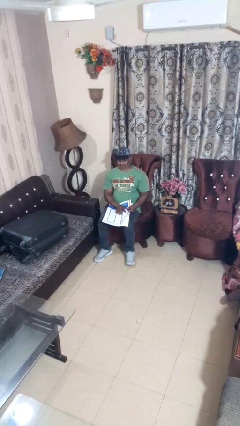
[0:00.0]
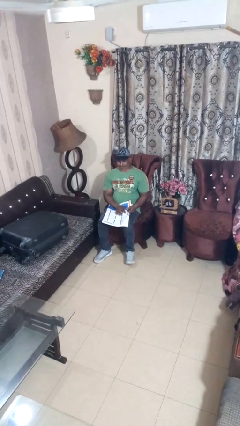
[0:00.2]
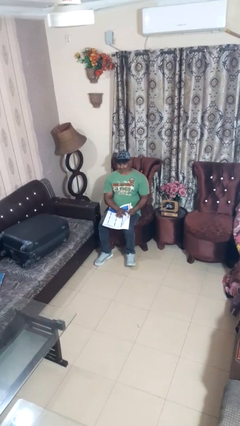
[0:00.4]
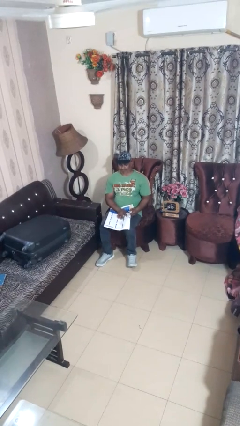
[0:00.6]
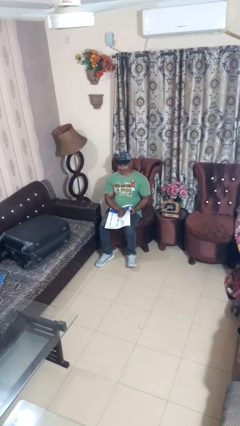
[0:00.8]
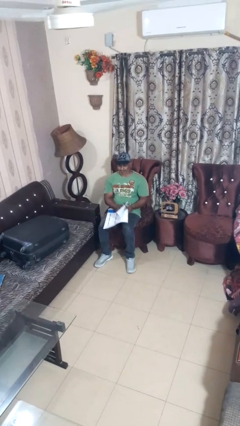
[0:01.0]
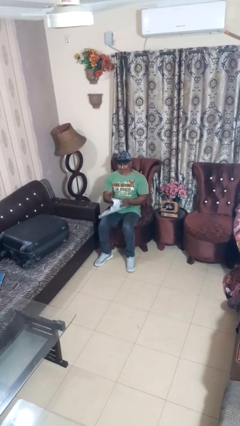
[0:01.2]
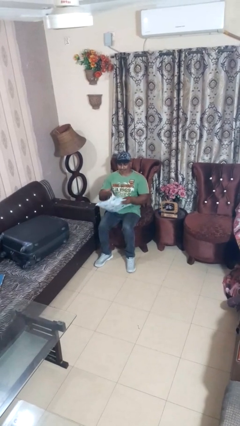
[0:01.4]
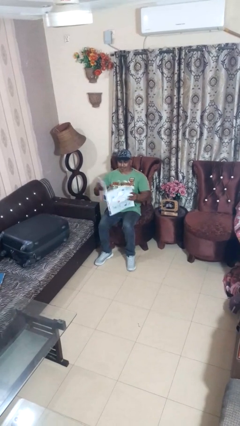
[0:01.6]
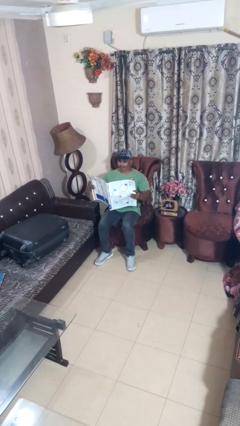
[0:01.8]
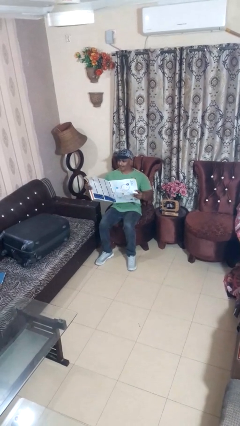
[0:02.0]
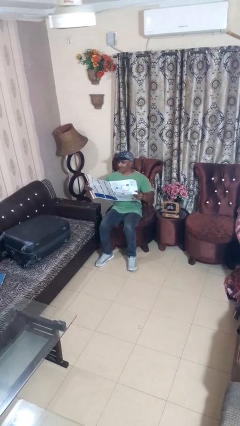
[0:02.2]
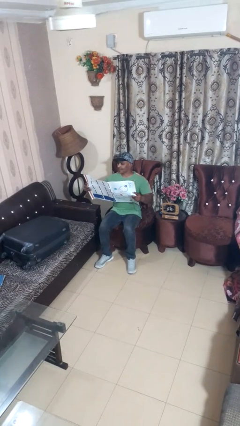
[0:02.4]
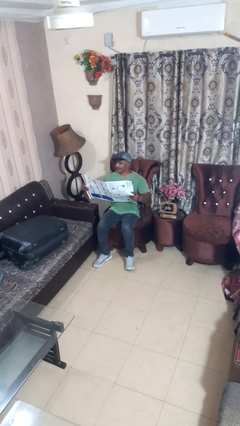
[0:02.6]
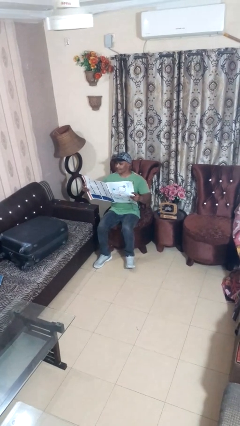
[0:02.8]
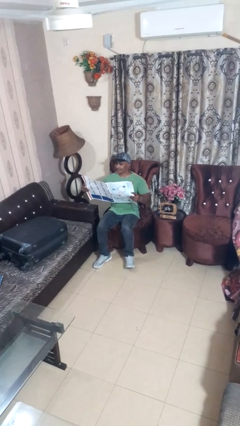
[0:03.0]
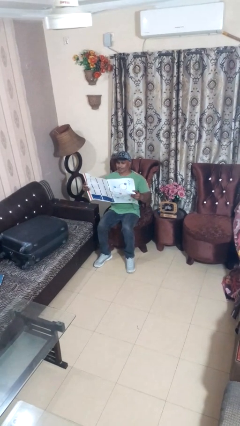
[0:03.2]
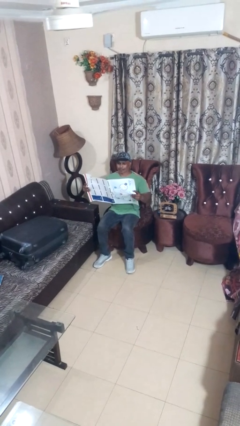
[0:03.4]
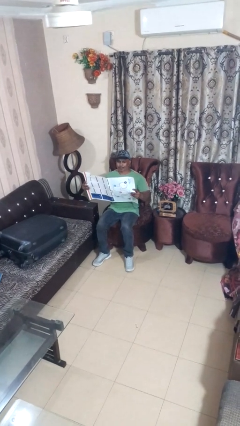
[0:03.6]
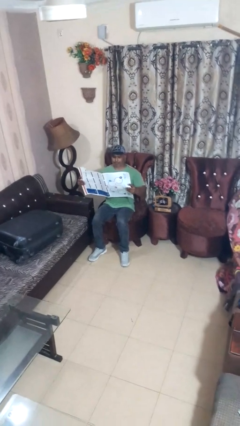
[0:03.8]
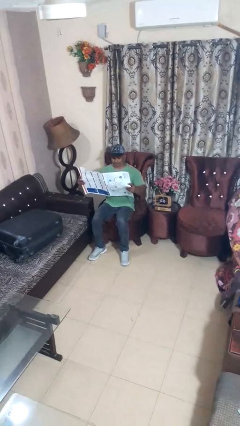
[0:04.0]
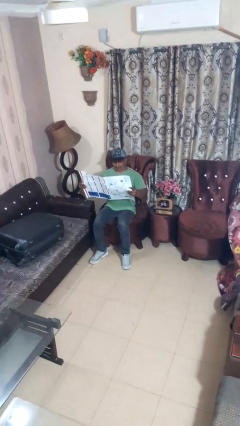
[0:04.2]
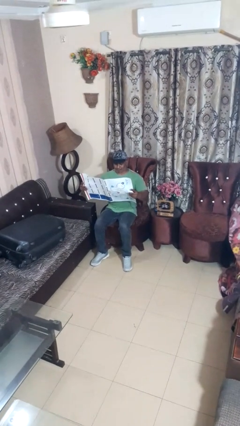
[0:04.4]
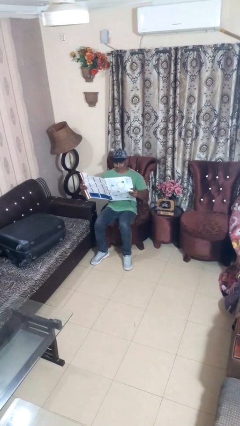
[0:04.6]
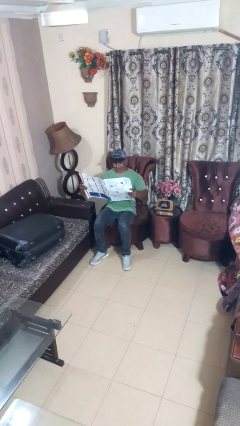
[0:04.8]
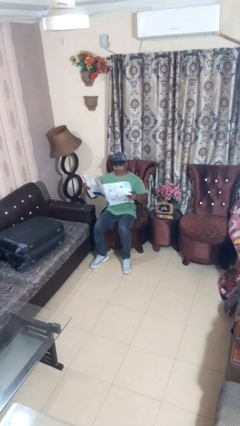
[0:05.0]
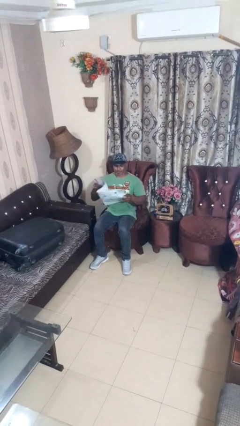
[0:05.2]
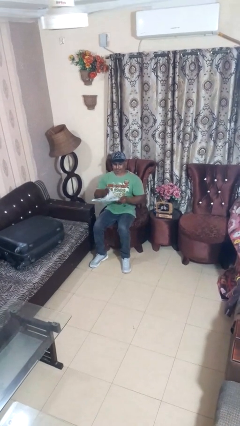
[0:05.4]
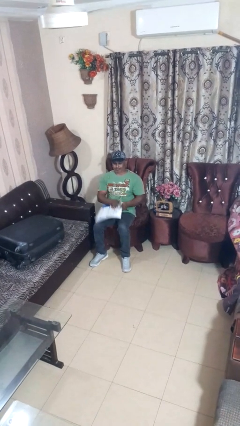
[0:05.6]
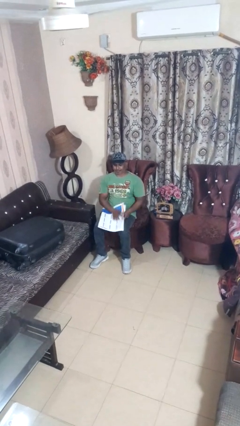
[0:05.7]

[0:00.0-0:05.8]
person reads newspaper

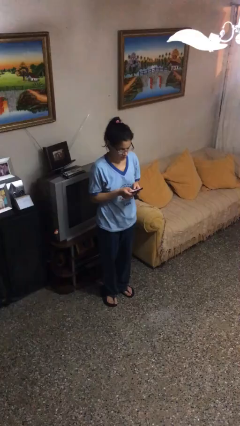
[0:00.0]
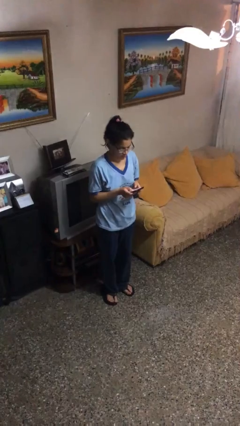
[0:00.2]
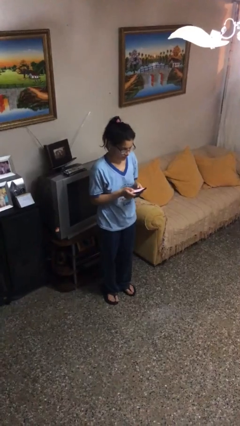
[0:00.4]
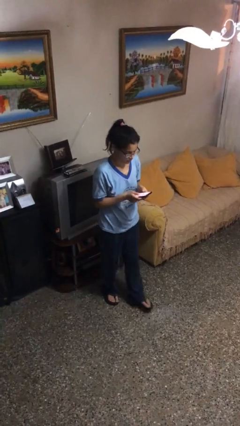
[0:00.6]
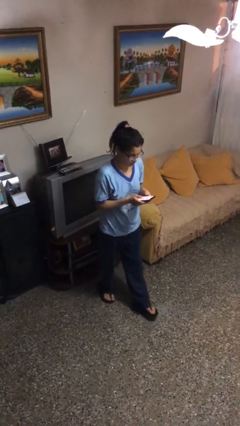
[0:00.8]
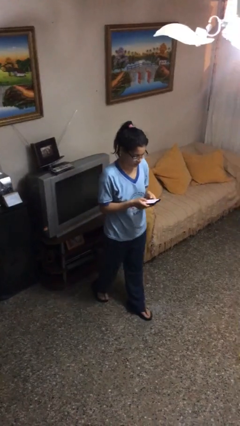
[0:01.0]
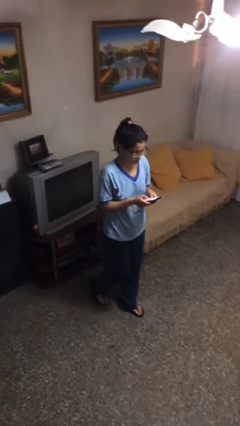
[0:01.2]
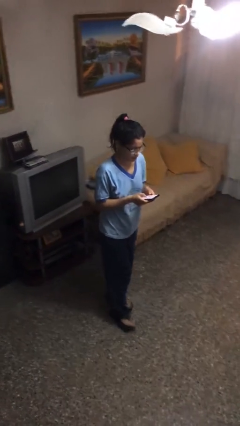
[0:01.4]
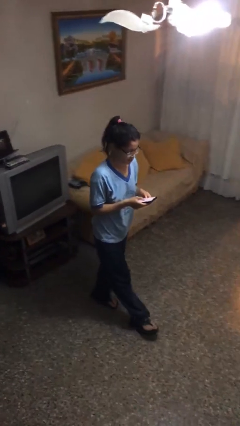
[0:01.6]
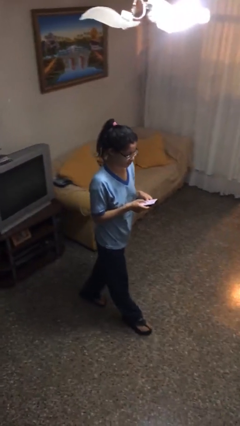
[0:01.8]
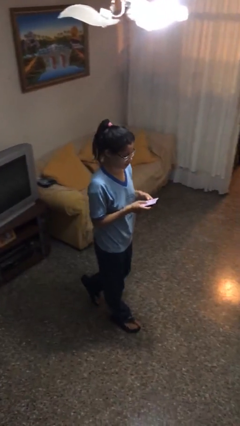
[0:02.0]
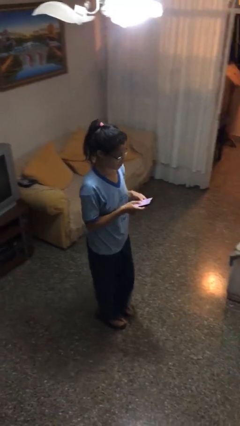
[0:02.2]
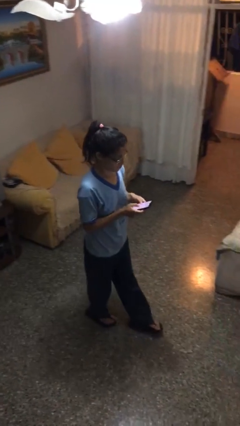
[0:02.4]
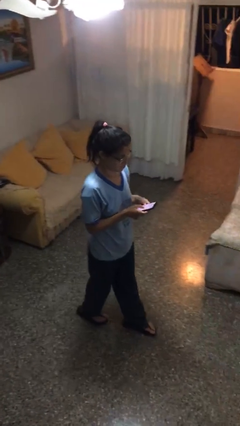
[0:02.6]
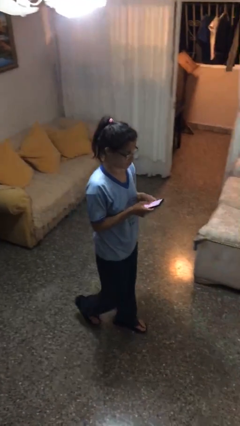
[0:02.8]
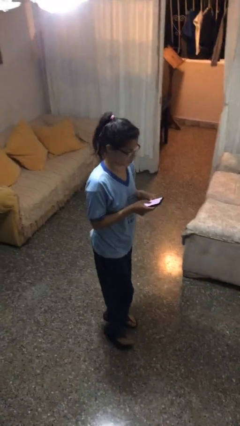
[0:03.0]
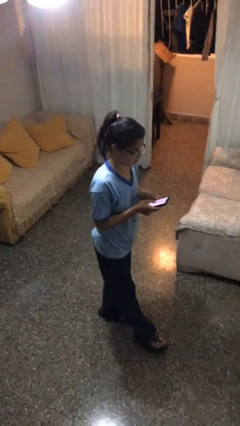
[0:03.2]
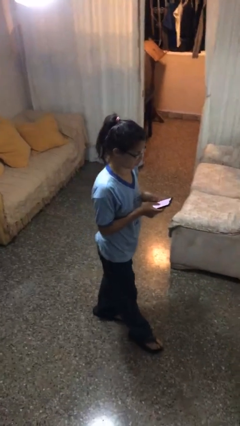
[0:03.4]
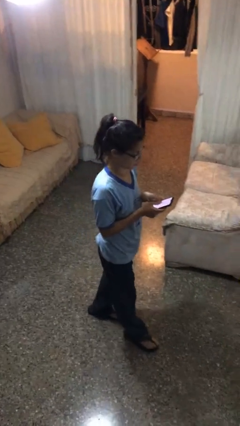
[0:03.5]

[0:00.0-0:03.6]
person texts on phone

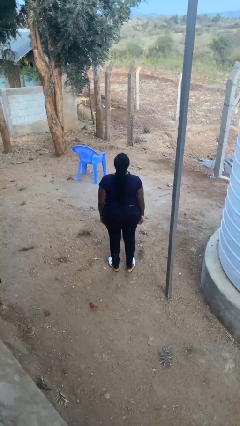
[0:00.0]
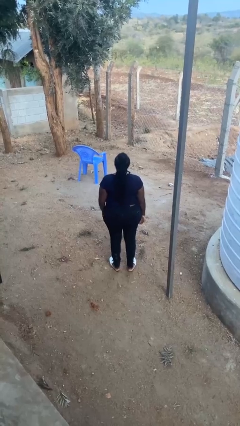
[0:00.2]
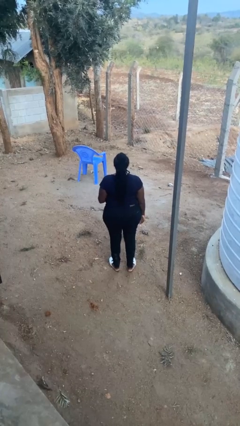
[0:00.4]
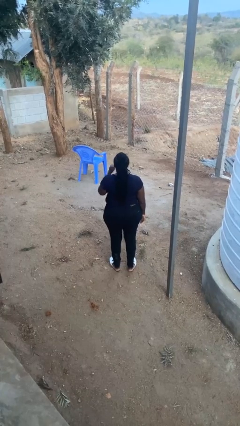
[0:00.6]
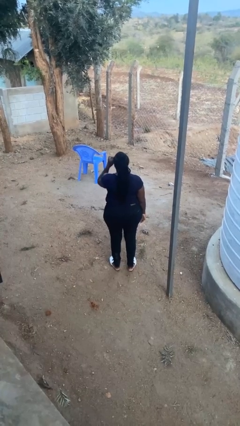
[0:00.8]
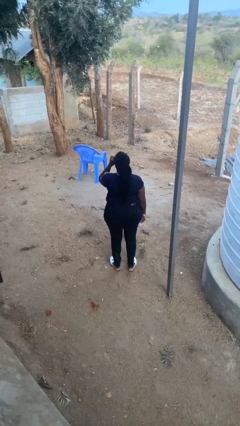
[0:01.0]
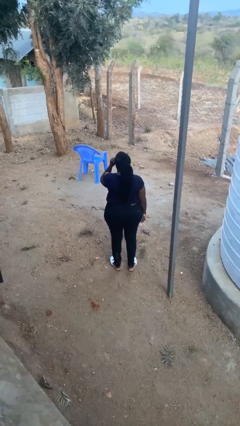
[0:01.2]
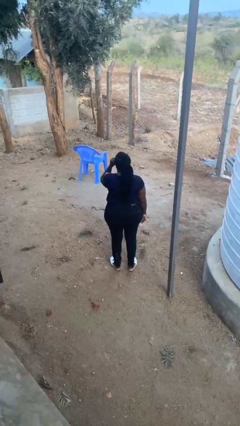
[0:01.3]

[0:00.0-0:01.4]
person rubs eyes

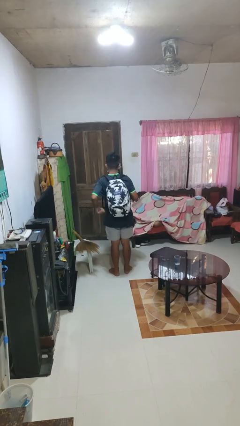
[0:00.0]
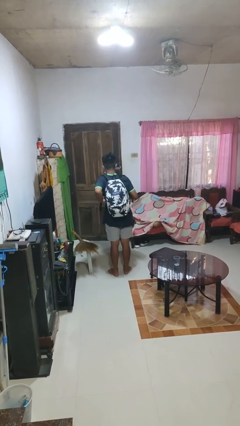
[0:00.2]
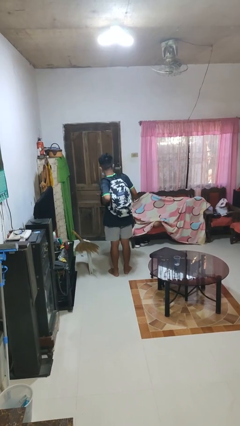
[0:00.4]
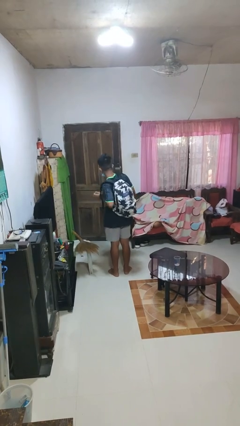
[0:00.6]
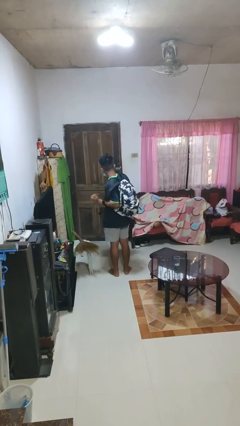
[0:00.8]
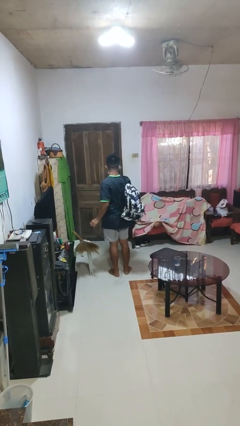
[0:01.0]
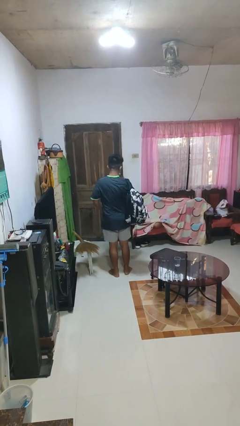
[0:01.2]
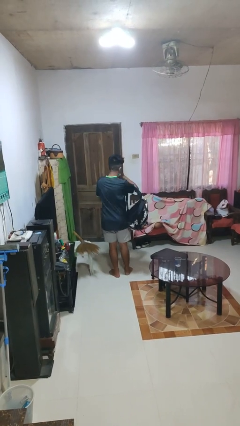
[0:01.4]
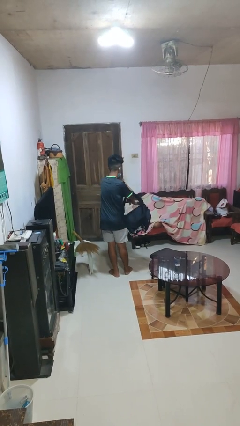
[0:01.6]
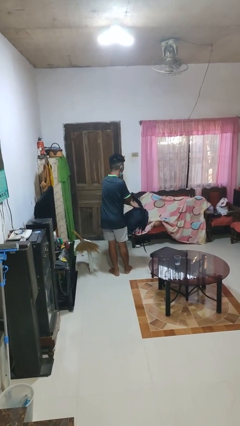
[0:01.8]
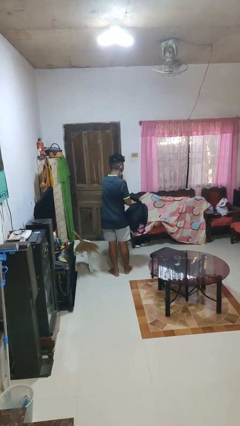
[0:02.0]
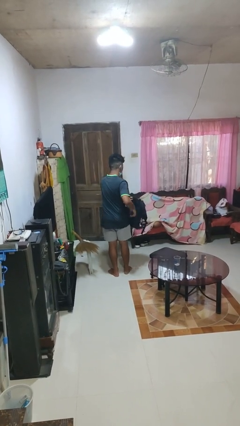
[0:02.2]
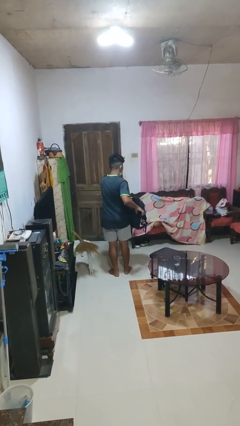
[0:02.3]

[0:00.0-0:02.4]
person takes off backpack

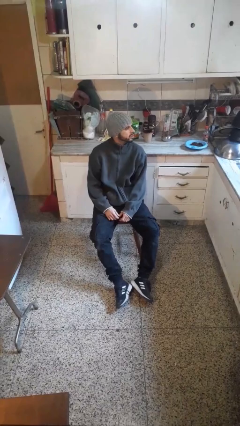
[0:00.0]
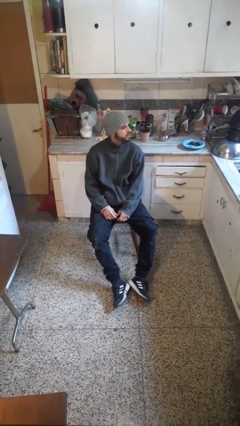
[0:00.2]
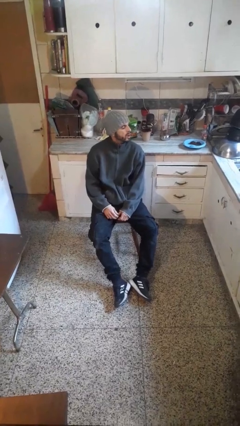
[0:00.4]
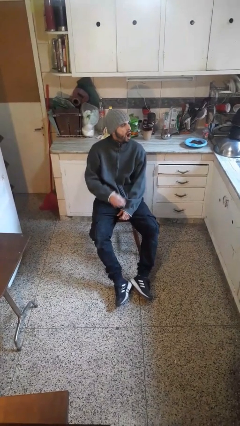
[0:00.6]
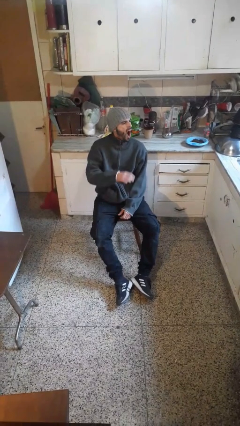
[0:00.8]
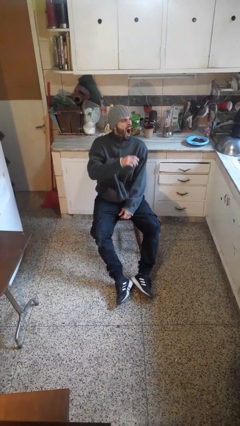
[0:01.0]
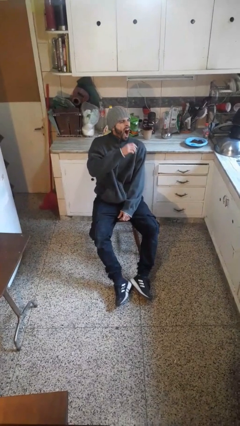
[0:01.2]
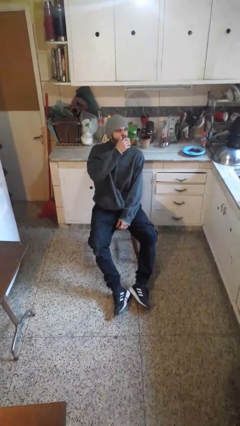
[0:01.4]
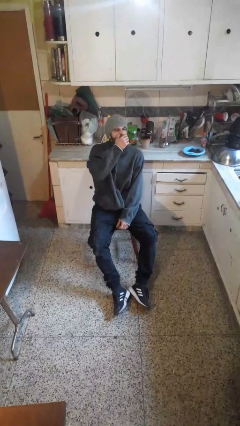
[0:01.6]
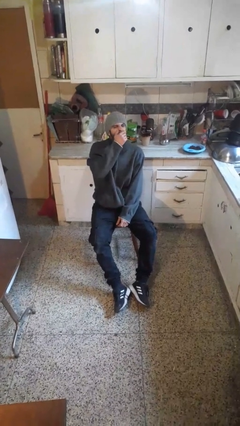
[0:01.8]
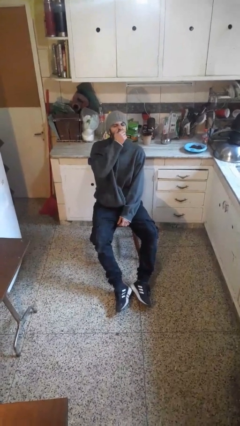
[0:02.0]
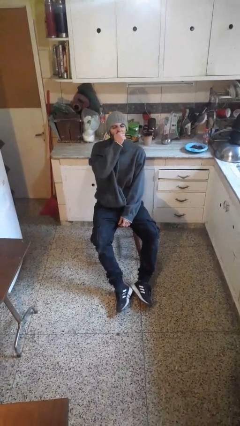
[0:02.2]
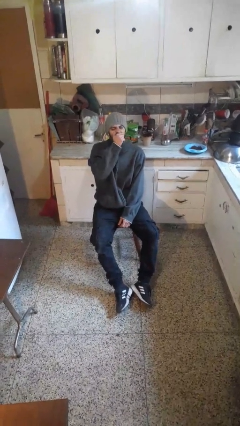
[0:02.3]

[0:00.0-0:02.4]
person yawns

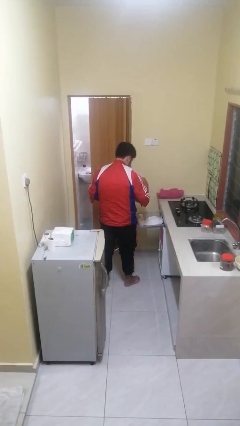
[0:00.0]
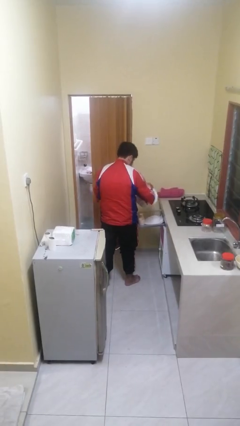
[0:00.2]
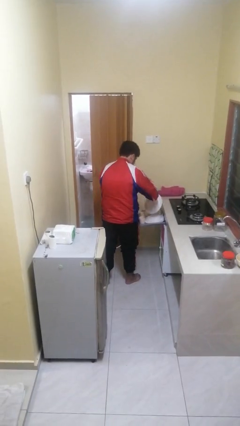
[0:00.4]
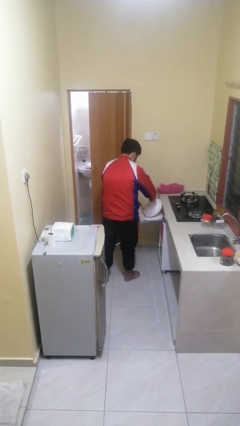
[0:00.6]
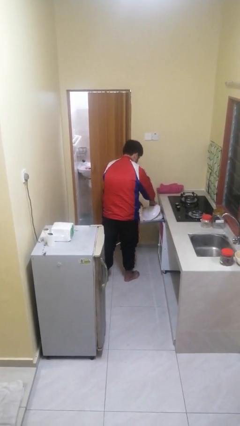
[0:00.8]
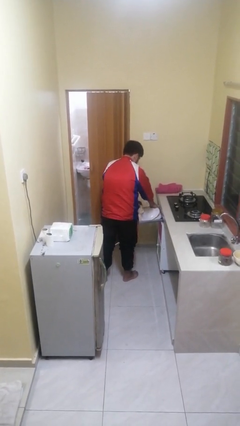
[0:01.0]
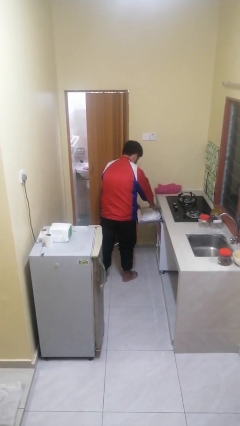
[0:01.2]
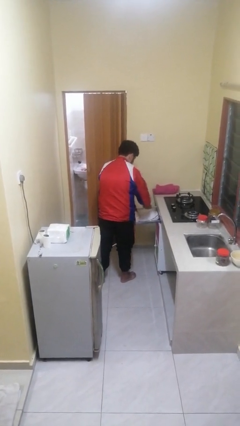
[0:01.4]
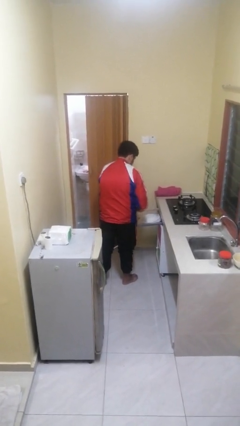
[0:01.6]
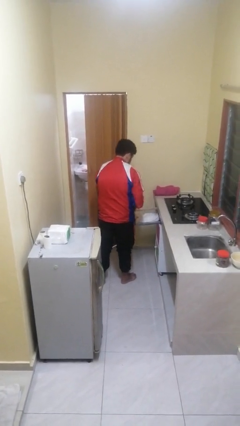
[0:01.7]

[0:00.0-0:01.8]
person puts object into kitchen drawer
